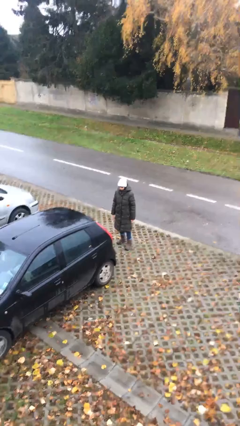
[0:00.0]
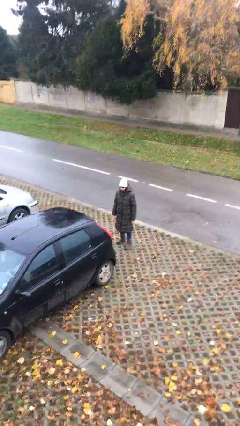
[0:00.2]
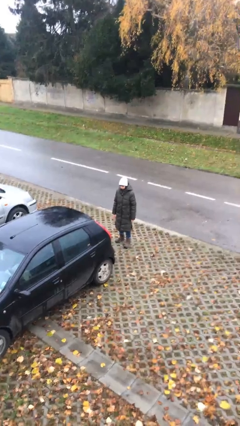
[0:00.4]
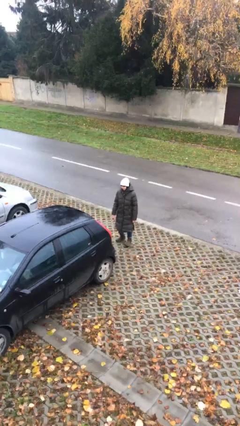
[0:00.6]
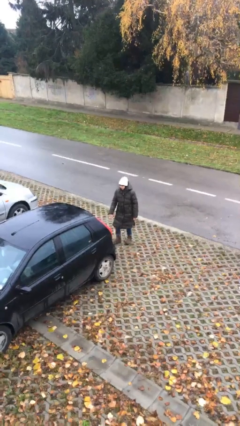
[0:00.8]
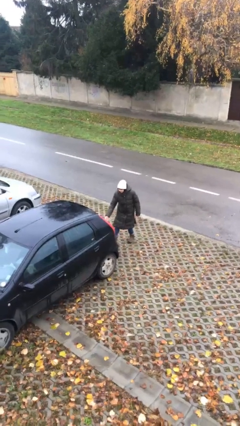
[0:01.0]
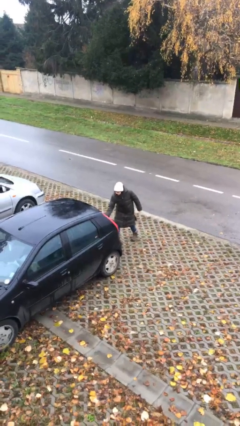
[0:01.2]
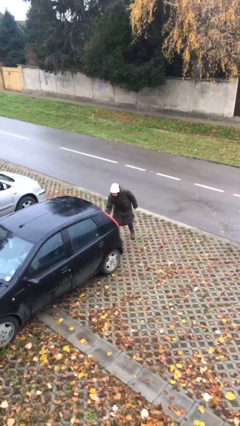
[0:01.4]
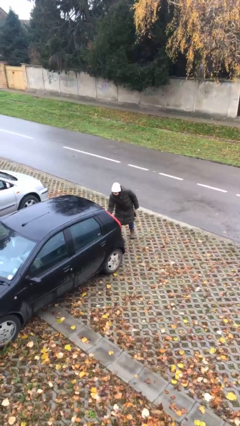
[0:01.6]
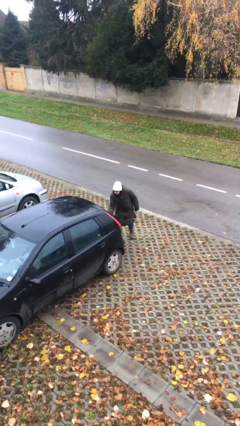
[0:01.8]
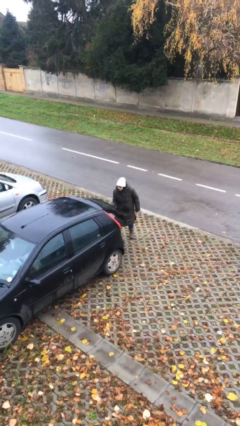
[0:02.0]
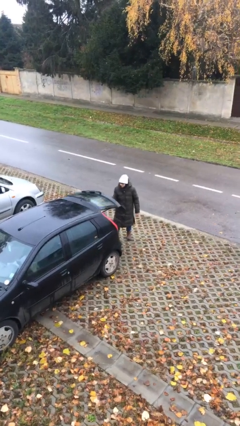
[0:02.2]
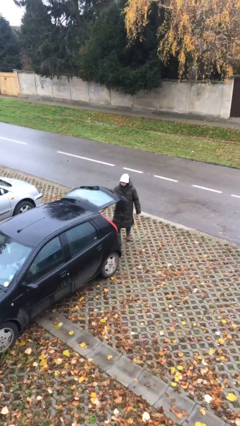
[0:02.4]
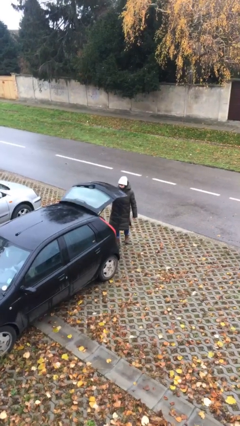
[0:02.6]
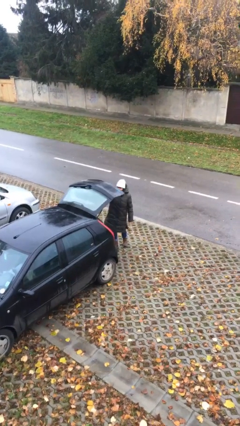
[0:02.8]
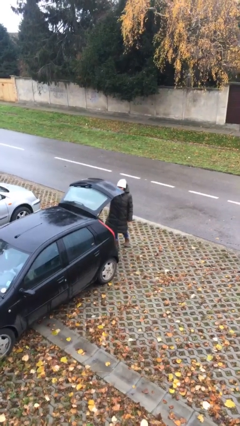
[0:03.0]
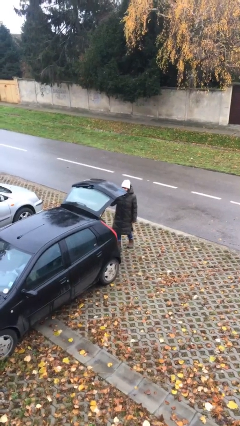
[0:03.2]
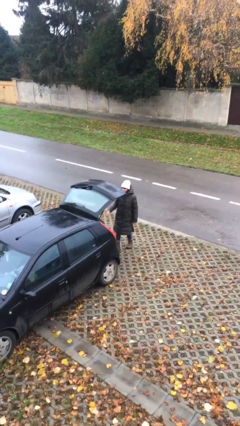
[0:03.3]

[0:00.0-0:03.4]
person opens car trunk

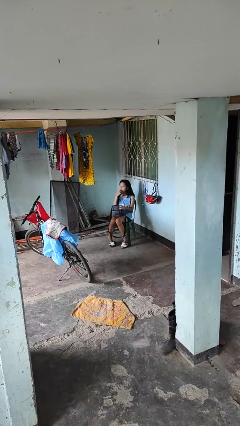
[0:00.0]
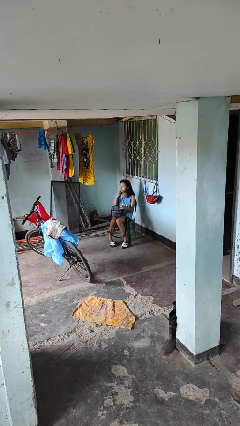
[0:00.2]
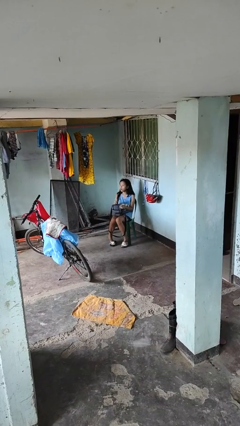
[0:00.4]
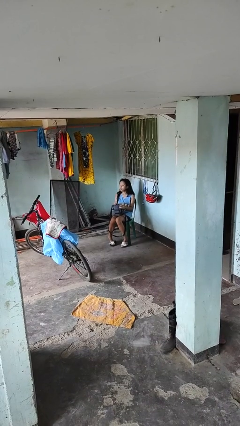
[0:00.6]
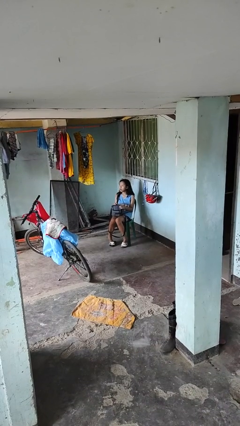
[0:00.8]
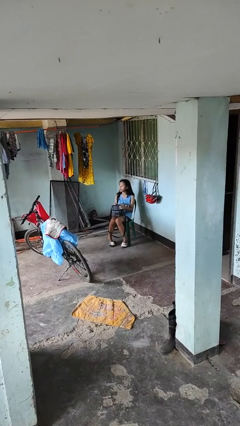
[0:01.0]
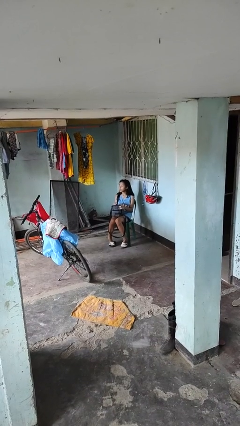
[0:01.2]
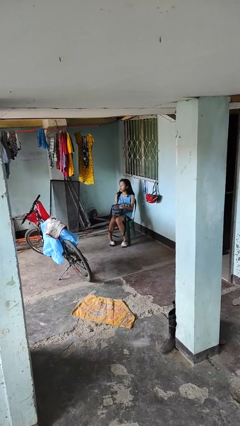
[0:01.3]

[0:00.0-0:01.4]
person eats snack from bag

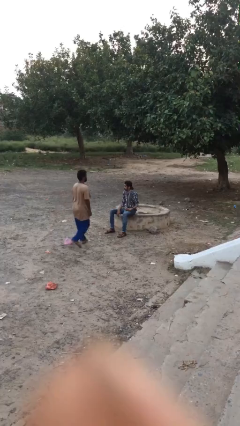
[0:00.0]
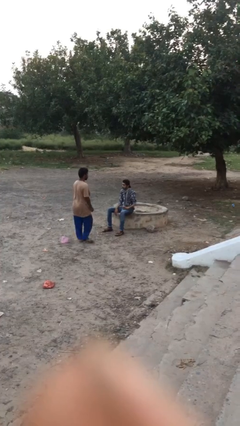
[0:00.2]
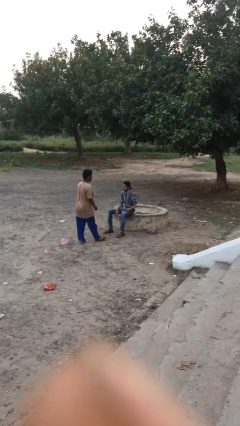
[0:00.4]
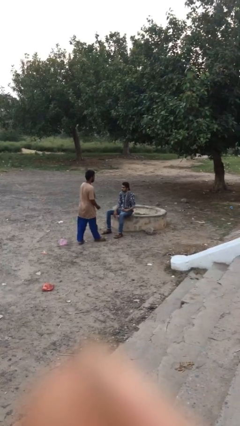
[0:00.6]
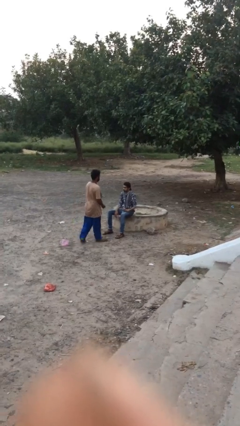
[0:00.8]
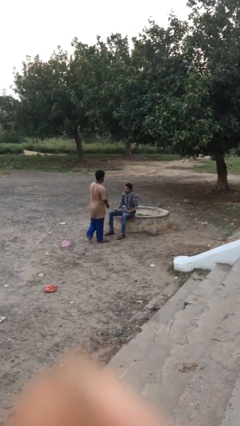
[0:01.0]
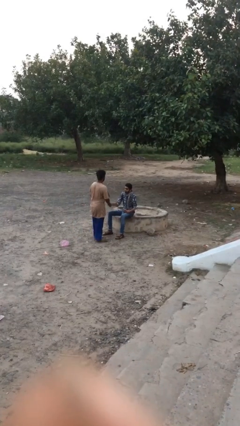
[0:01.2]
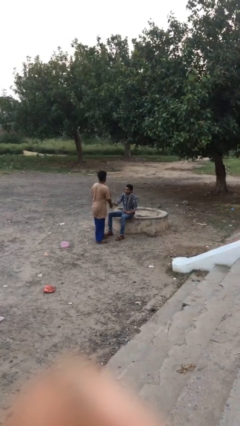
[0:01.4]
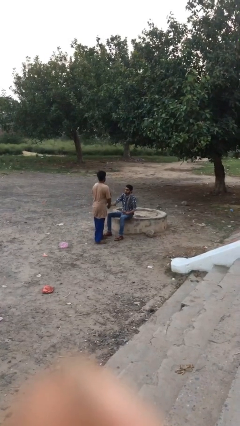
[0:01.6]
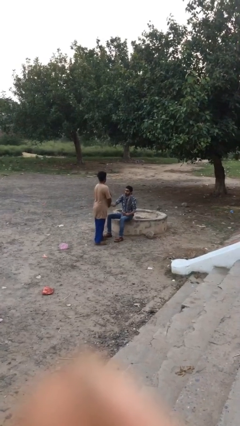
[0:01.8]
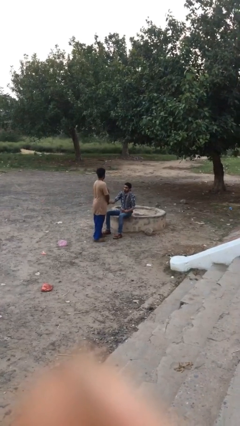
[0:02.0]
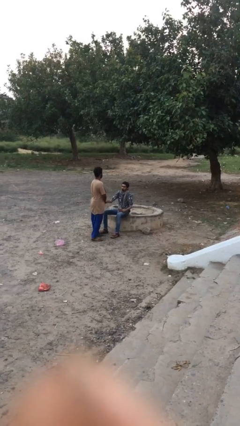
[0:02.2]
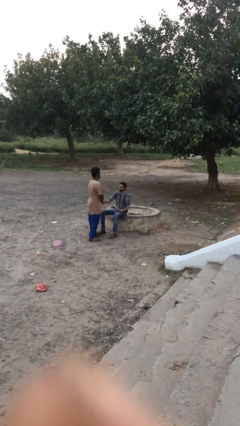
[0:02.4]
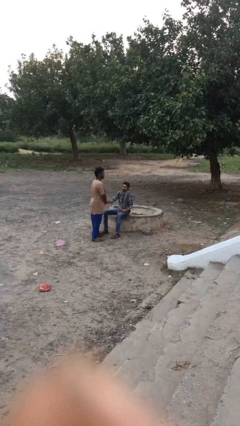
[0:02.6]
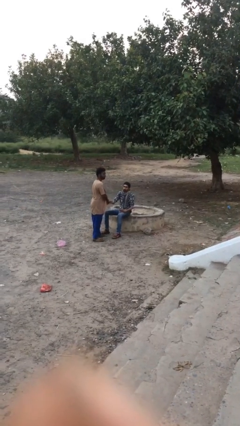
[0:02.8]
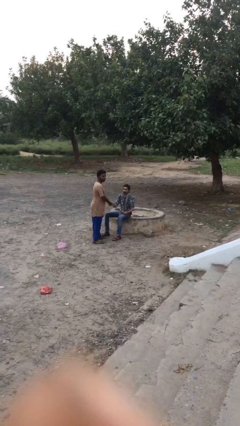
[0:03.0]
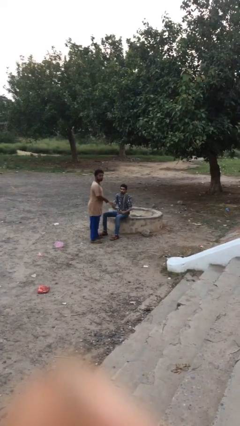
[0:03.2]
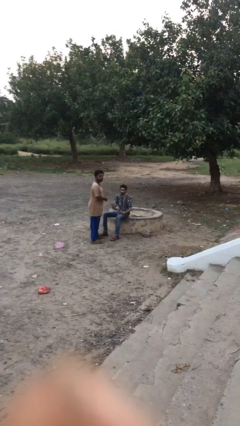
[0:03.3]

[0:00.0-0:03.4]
person shakes hand

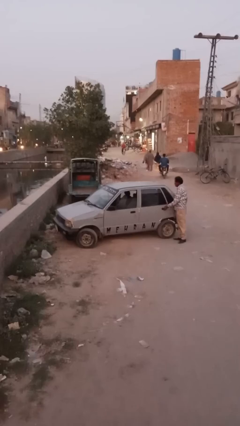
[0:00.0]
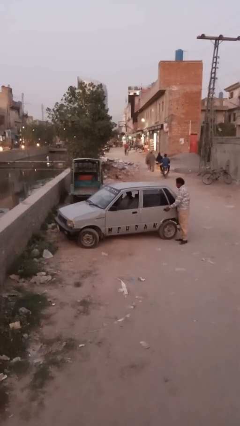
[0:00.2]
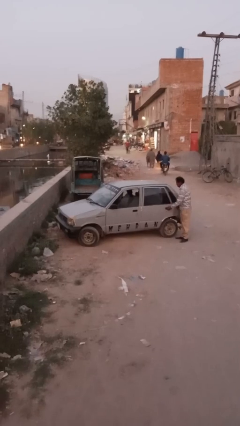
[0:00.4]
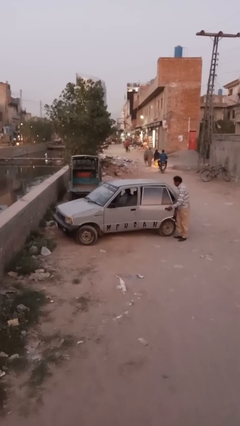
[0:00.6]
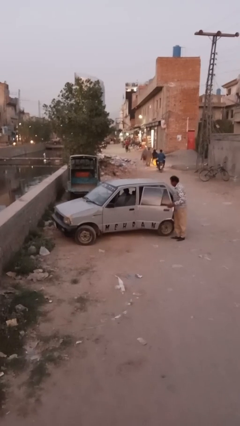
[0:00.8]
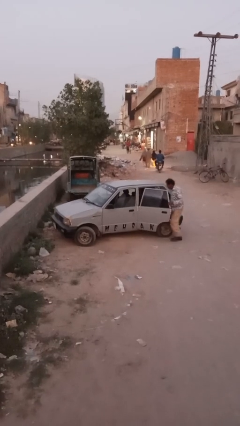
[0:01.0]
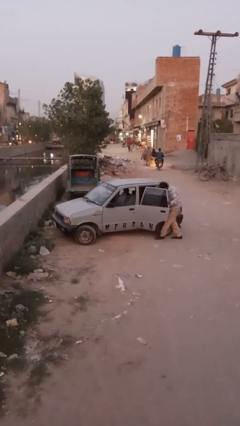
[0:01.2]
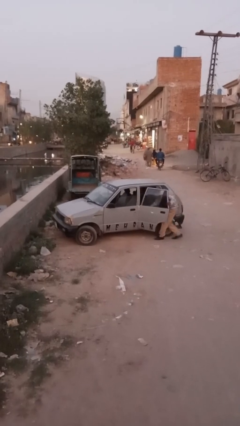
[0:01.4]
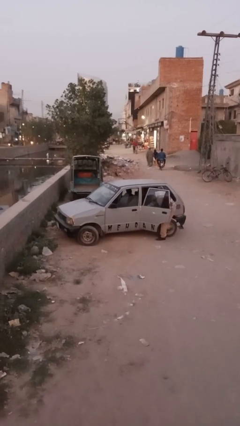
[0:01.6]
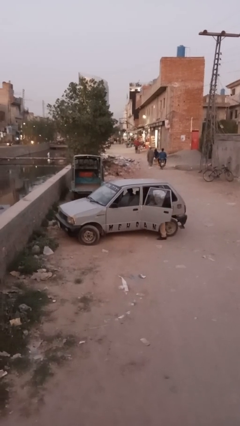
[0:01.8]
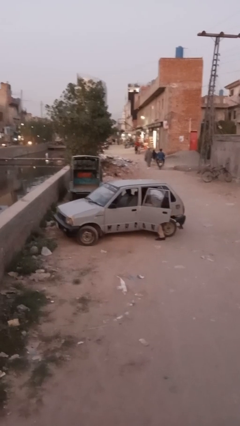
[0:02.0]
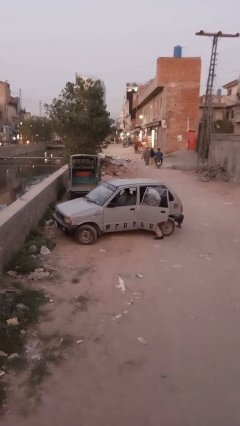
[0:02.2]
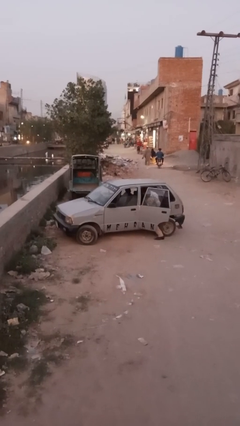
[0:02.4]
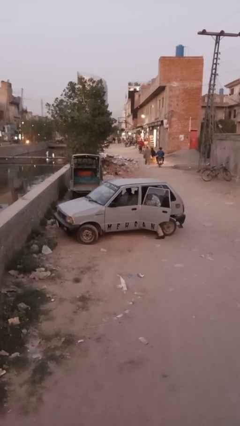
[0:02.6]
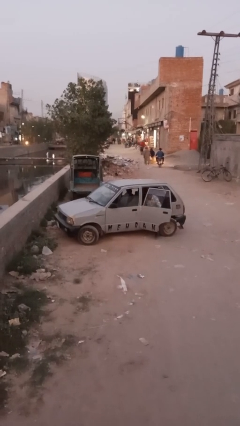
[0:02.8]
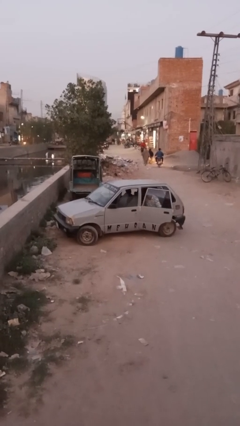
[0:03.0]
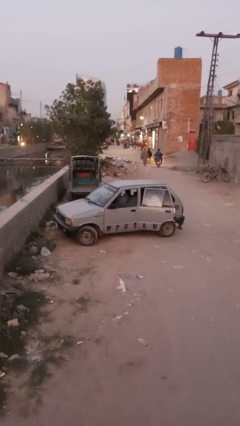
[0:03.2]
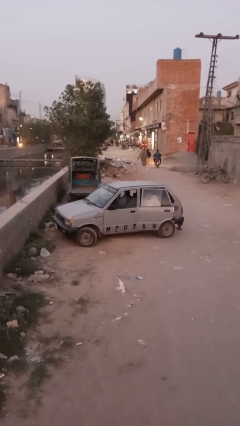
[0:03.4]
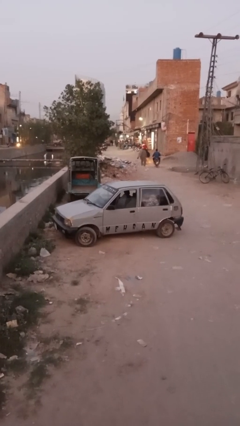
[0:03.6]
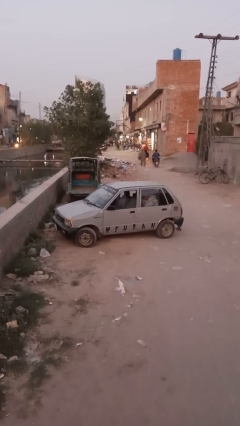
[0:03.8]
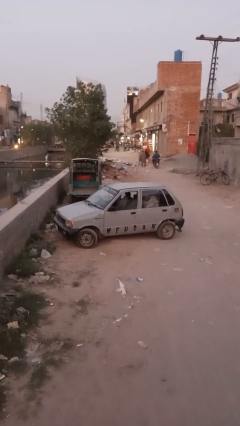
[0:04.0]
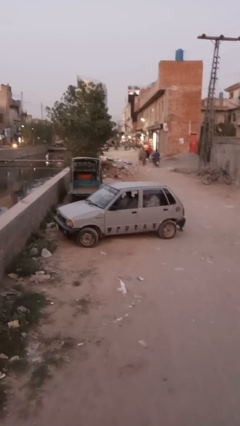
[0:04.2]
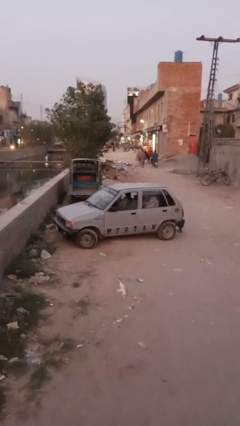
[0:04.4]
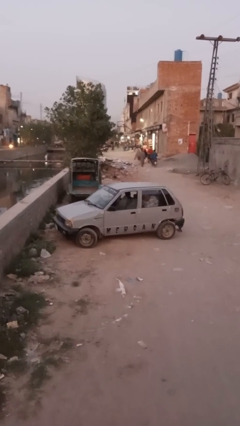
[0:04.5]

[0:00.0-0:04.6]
car picks up person

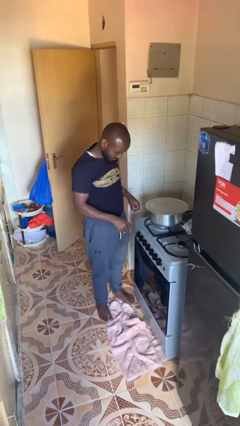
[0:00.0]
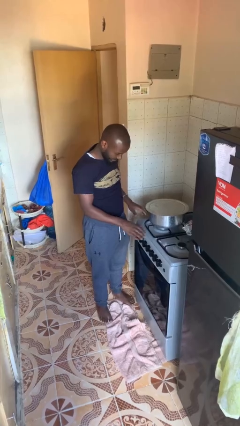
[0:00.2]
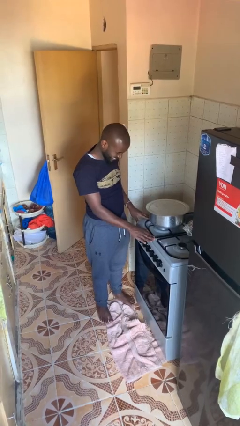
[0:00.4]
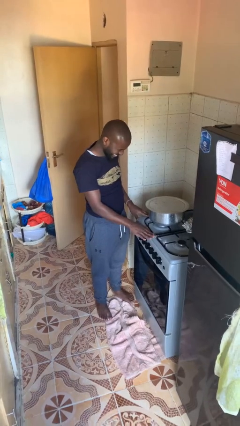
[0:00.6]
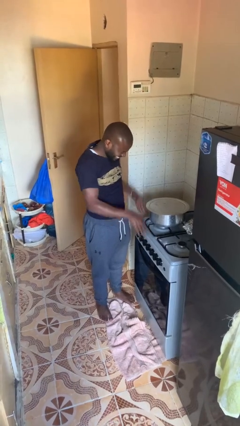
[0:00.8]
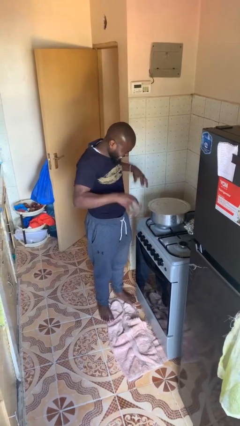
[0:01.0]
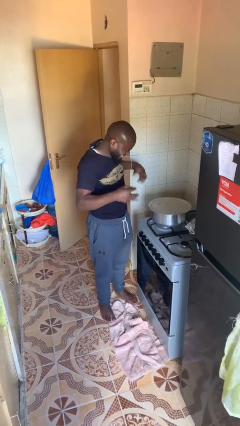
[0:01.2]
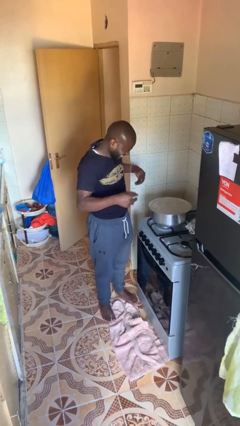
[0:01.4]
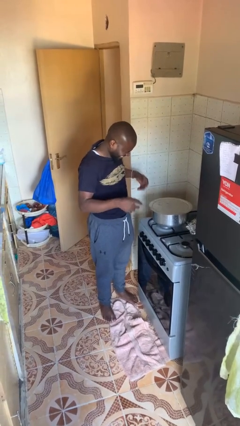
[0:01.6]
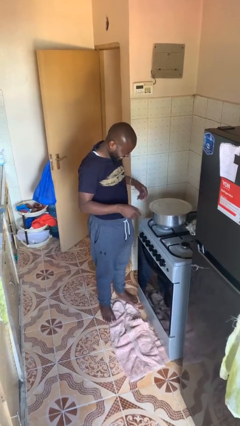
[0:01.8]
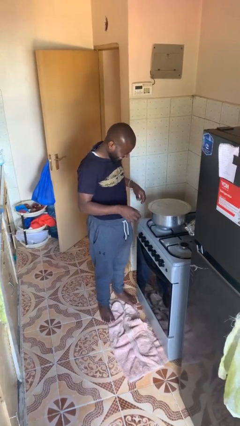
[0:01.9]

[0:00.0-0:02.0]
person burns hand

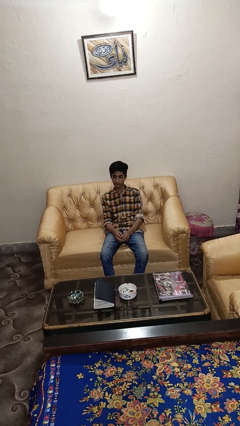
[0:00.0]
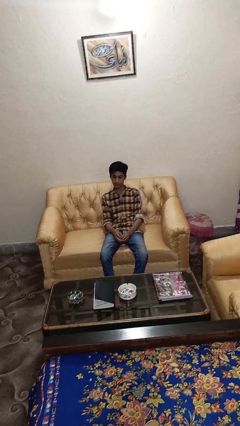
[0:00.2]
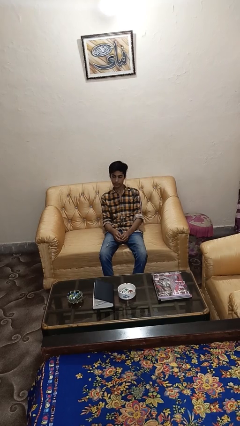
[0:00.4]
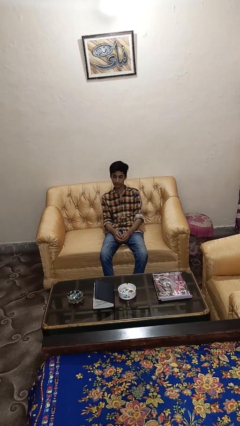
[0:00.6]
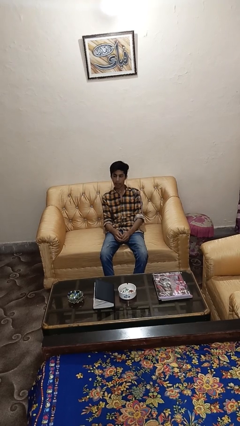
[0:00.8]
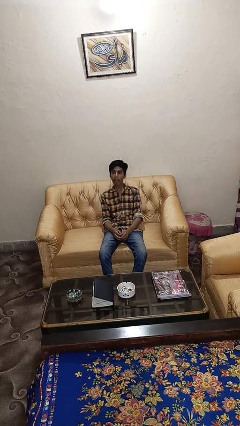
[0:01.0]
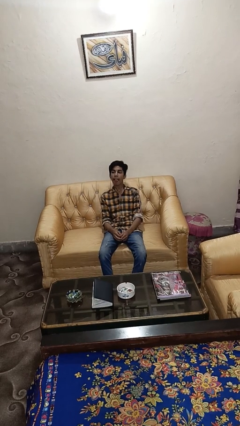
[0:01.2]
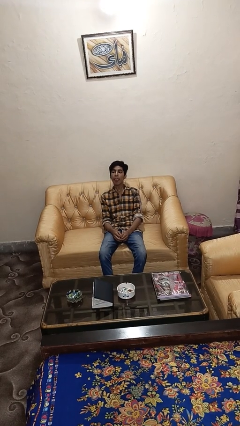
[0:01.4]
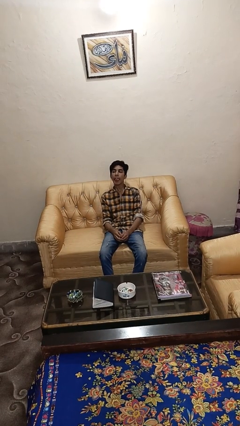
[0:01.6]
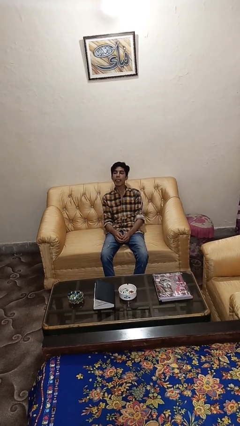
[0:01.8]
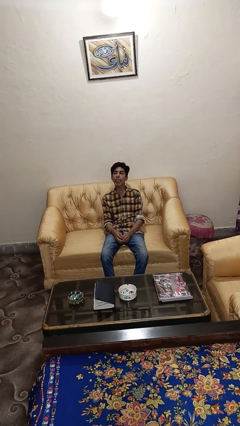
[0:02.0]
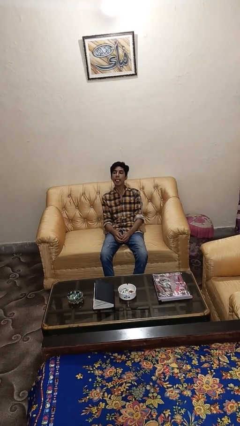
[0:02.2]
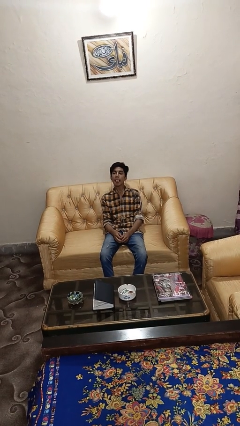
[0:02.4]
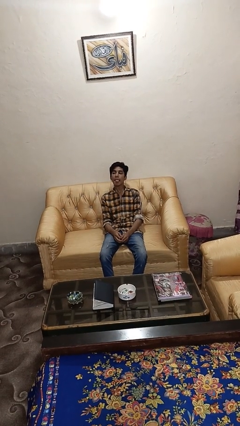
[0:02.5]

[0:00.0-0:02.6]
person sticks out tongue
